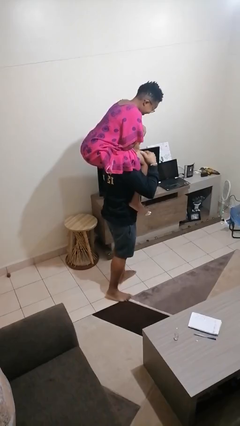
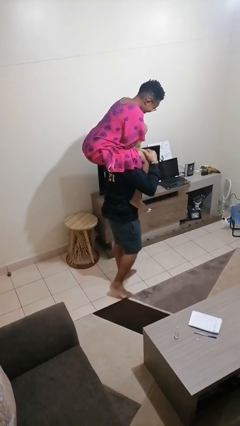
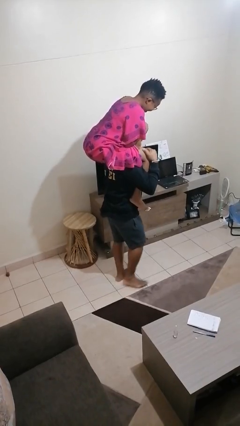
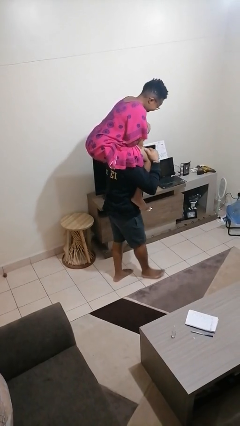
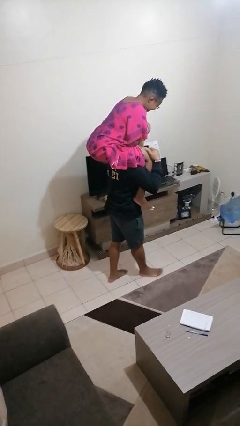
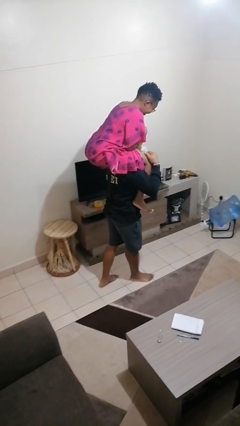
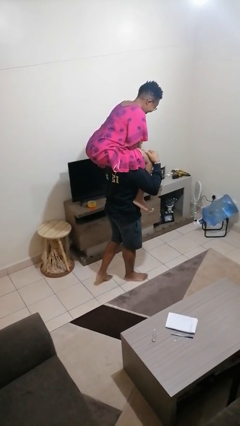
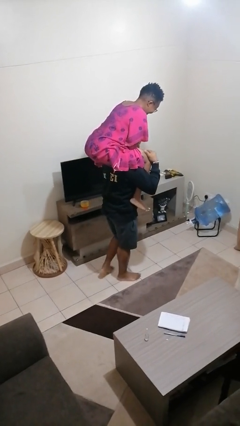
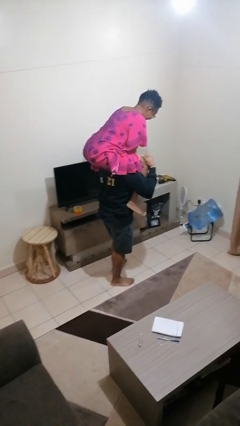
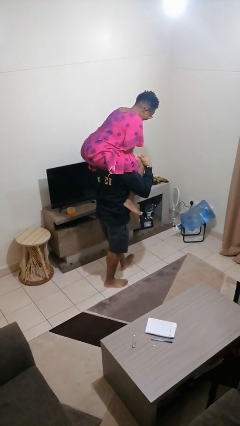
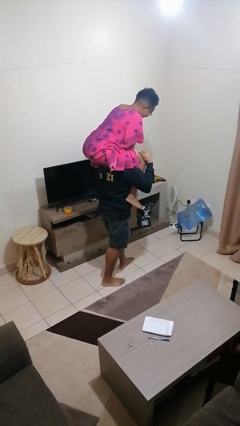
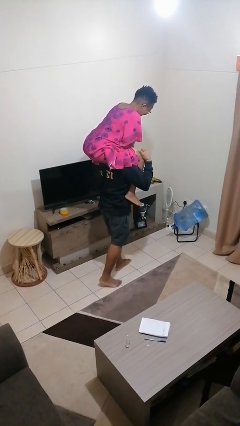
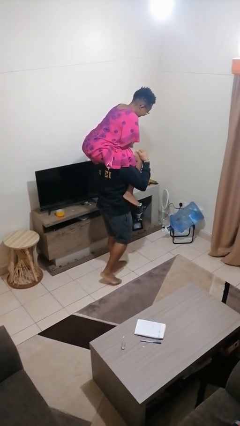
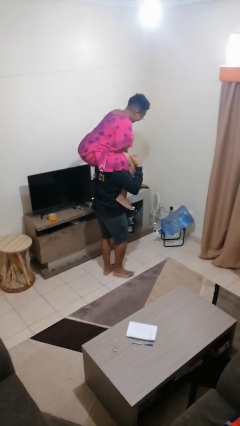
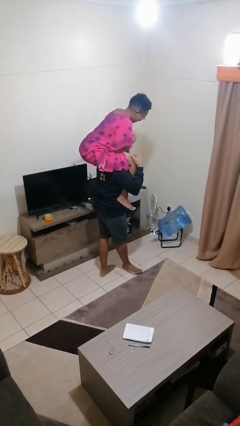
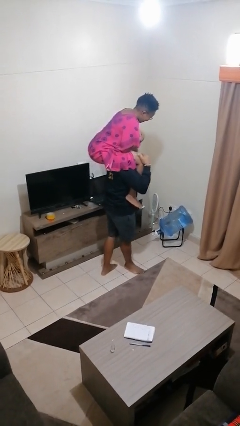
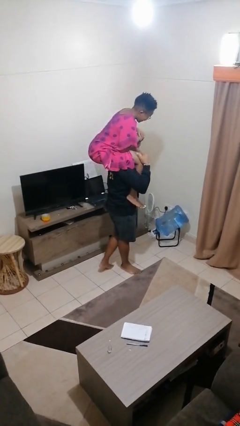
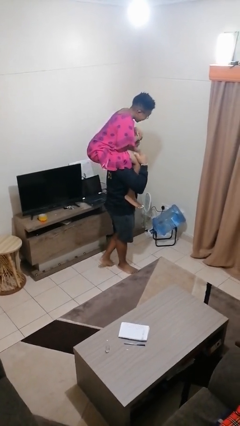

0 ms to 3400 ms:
person carries person on shoulders

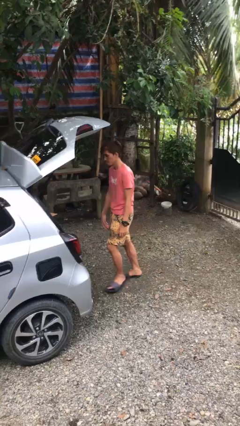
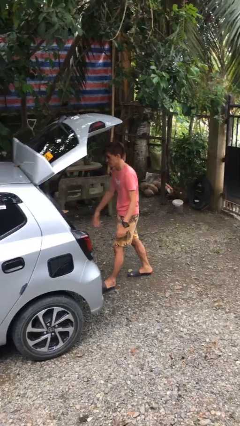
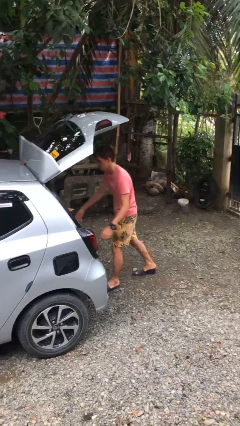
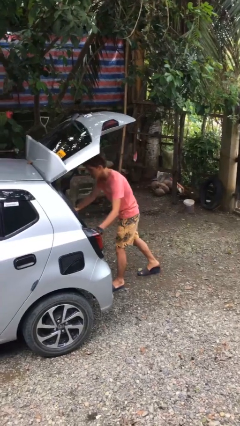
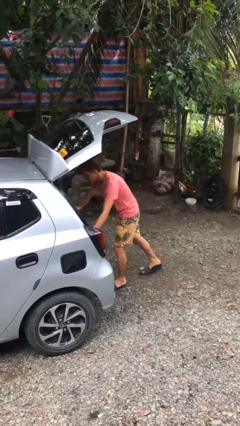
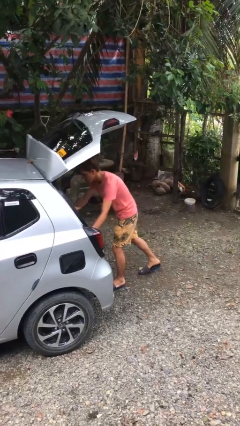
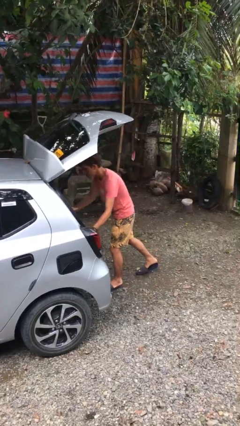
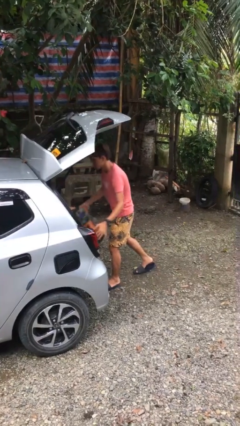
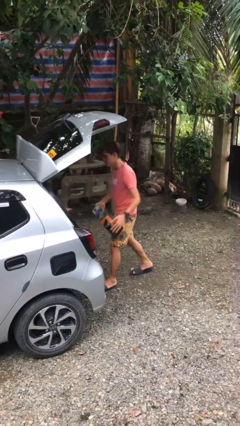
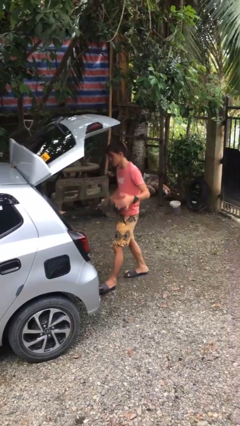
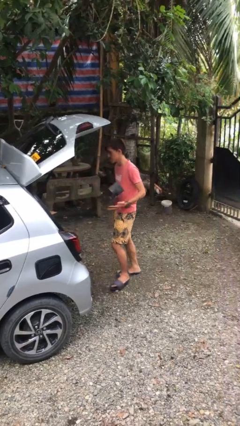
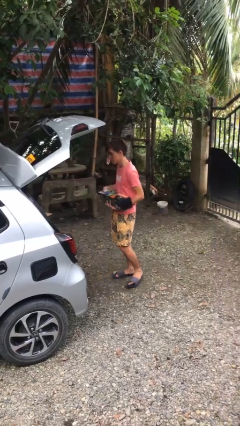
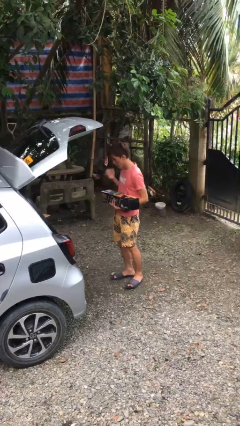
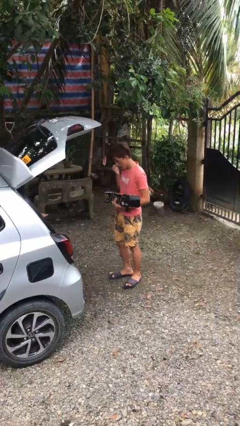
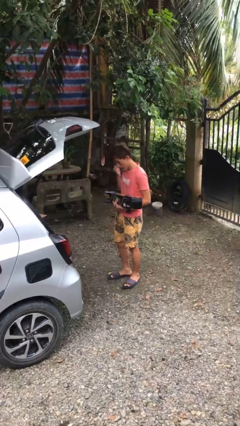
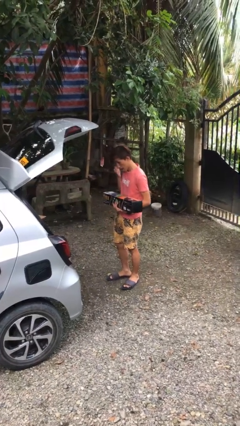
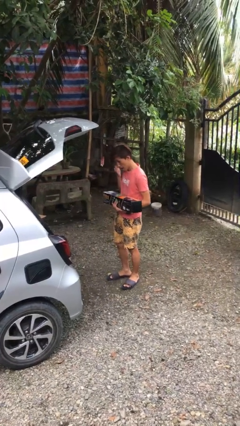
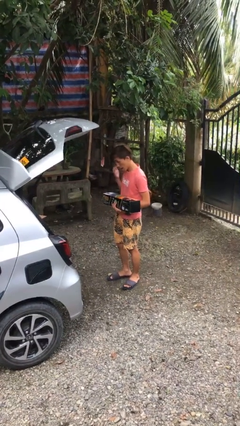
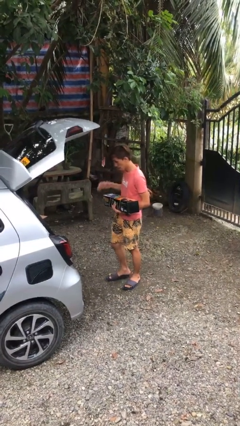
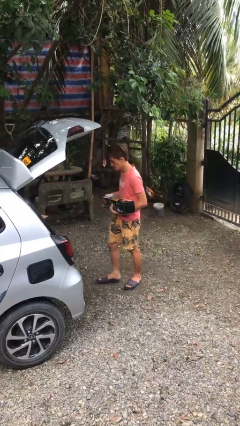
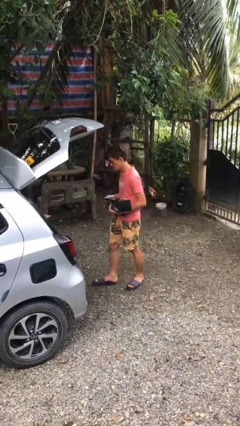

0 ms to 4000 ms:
person unloads car

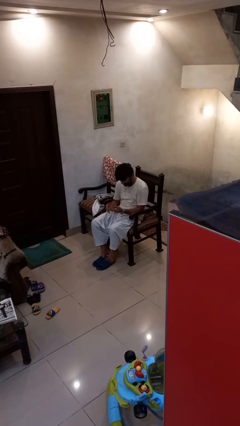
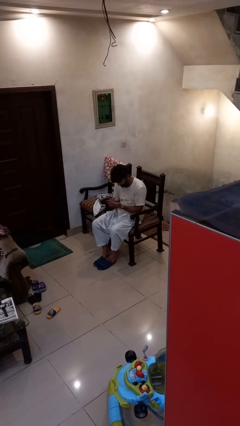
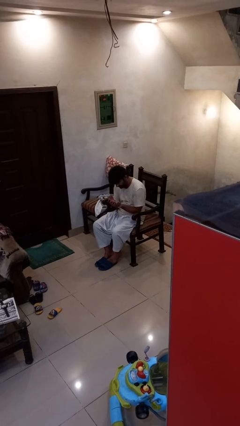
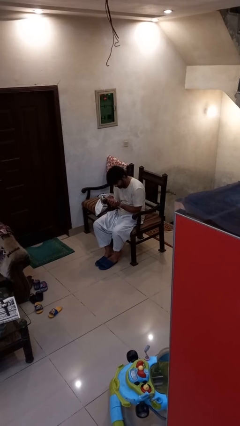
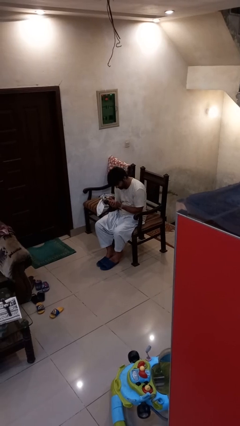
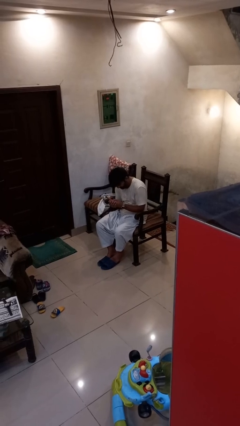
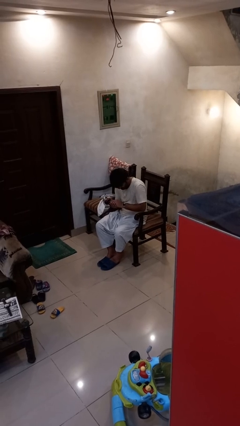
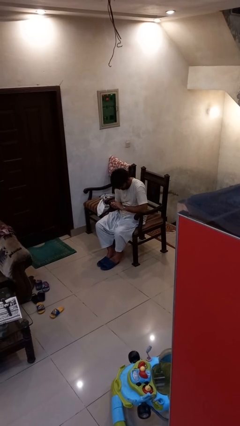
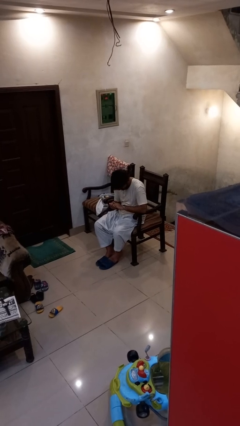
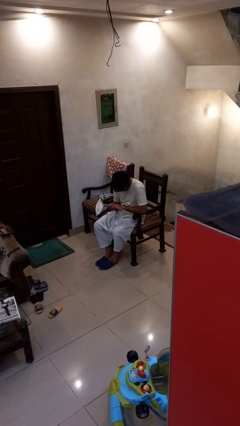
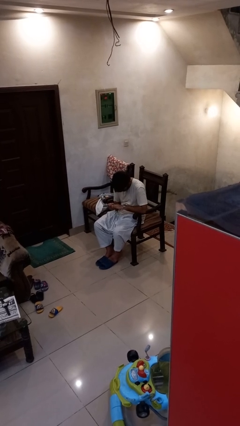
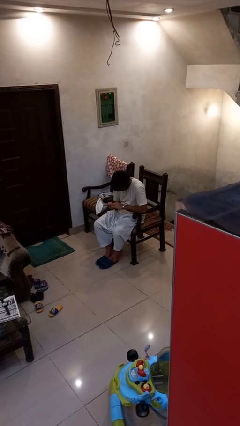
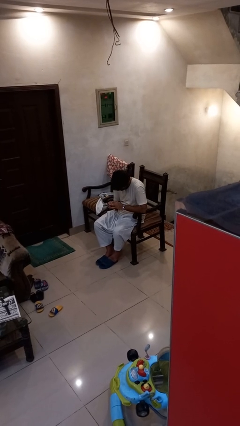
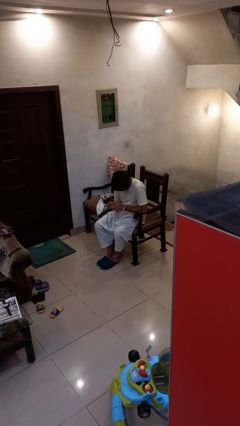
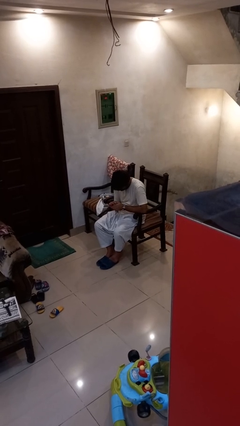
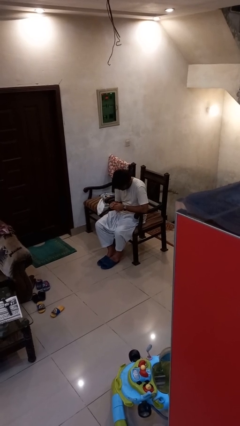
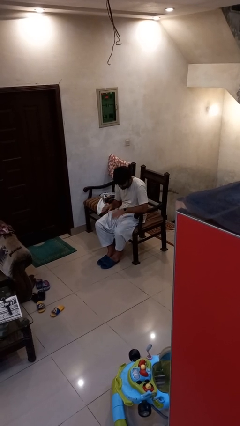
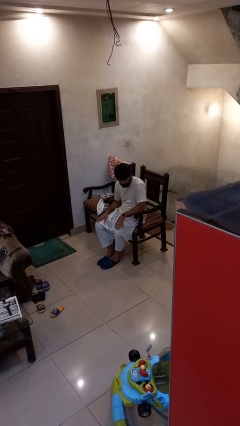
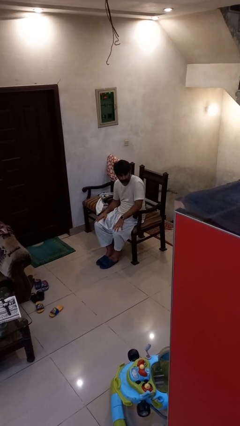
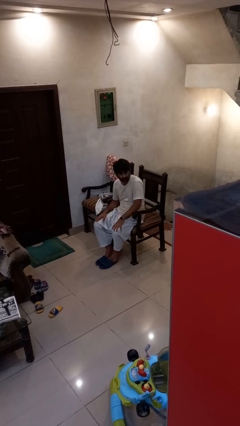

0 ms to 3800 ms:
person looks at hands in lap

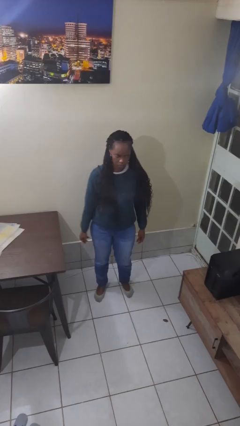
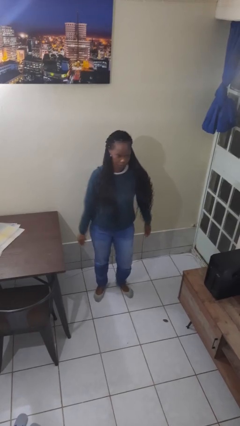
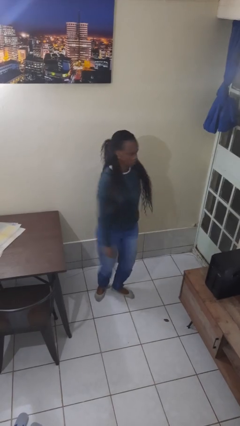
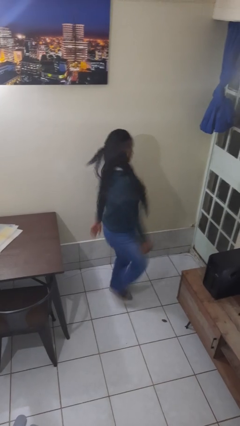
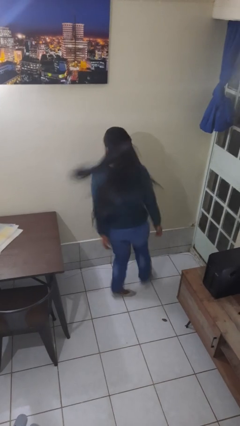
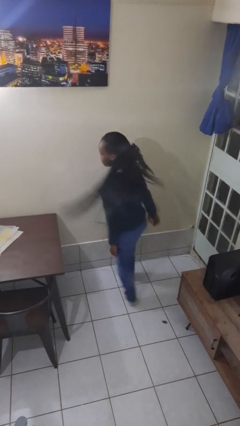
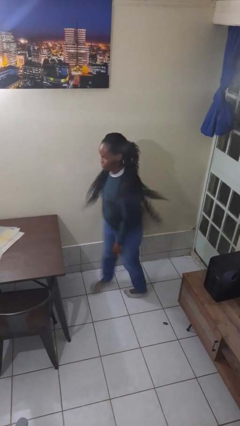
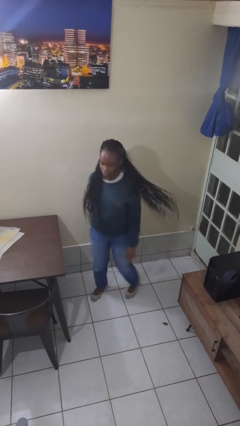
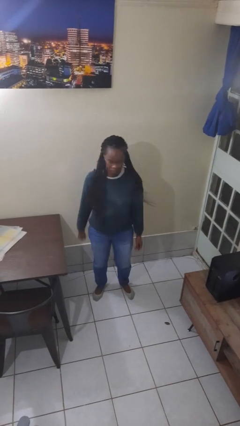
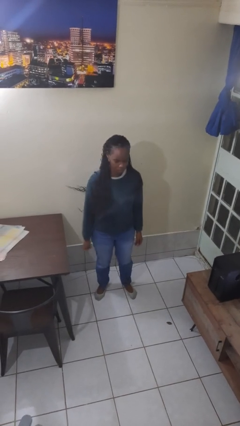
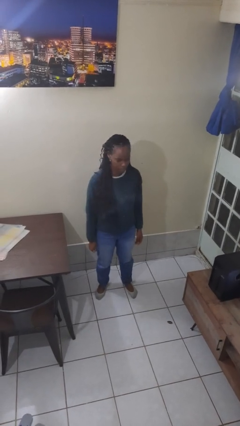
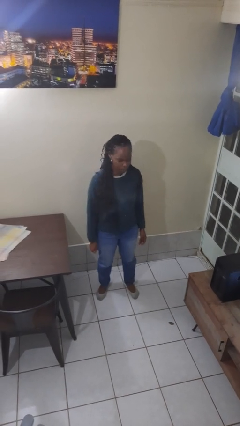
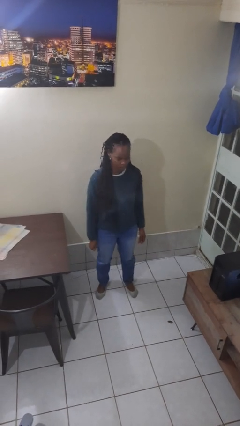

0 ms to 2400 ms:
person twirls

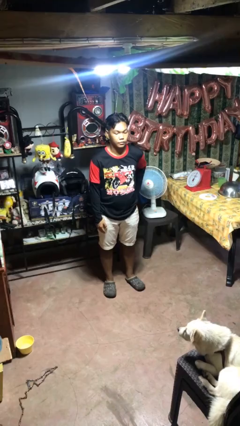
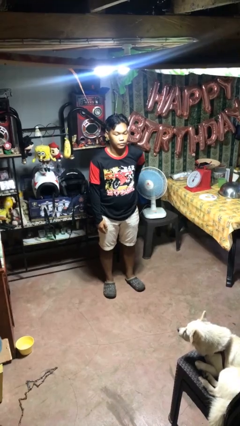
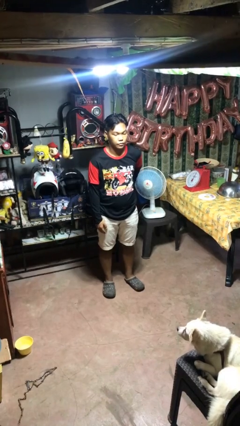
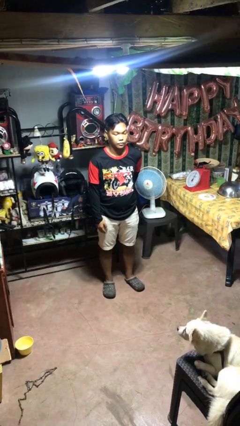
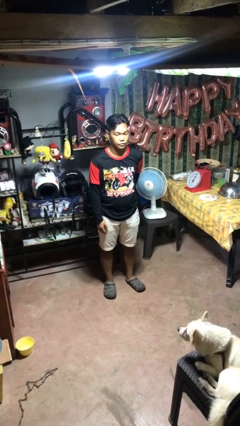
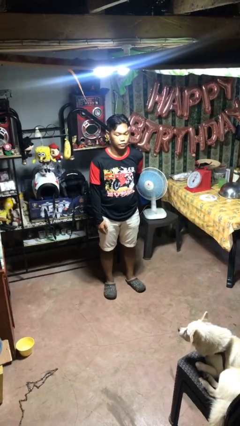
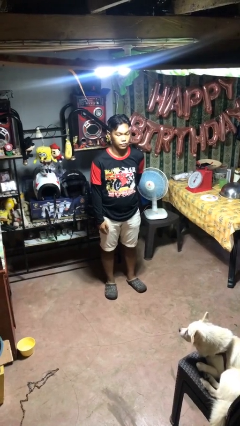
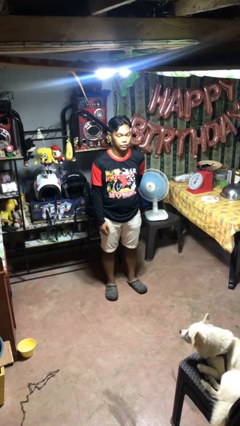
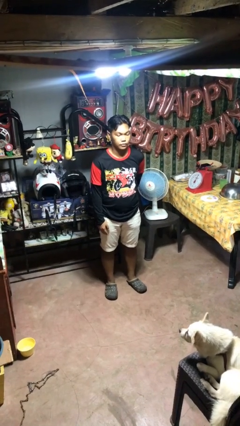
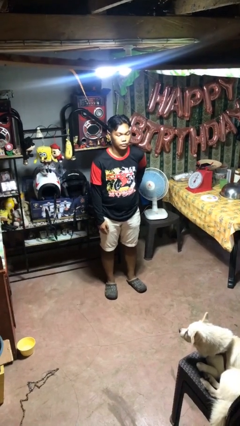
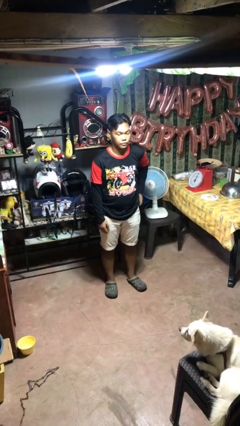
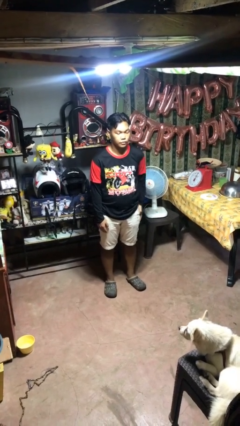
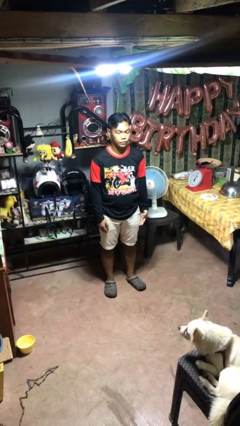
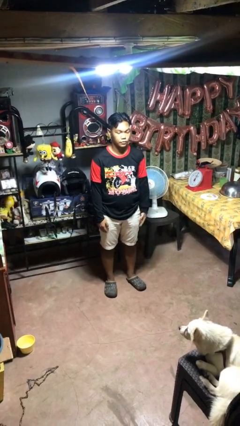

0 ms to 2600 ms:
person puts hands in back pockets

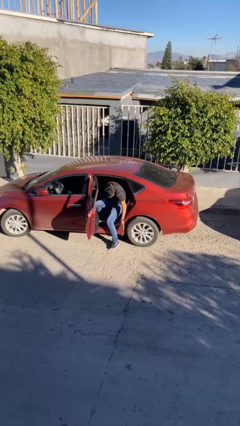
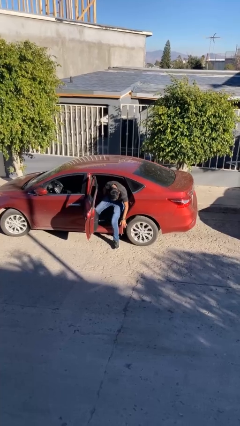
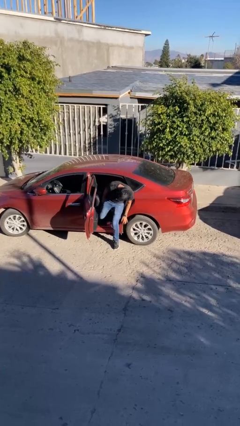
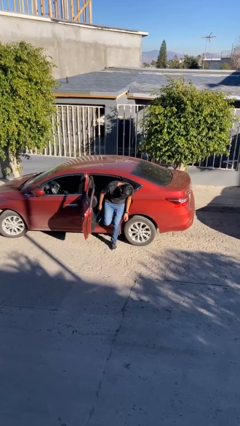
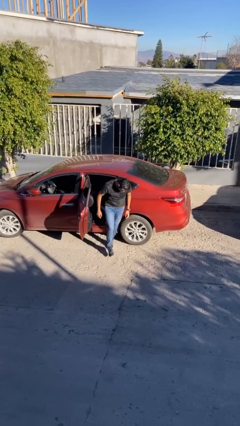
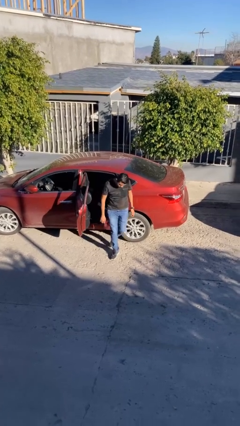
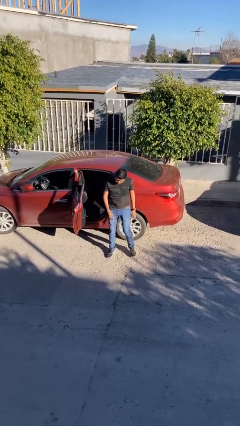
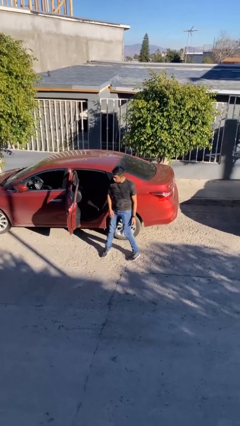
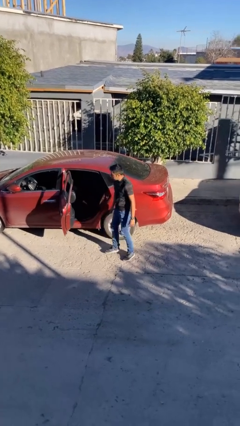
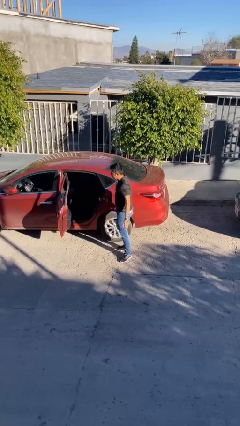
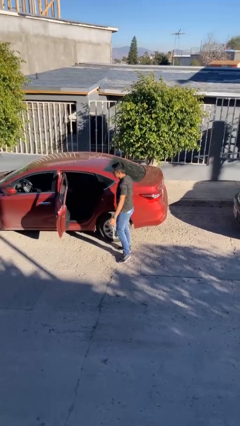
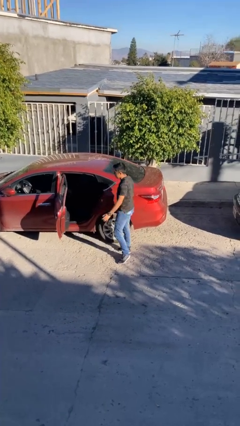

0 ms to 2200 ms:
person exits car
